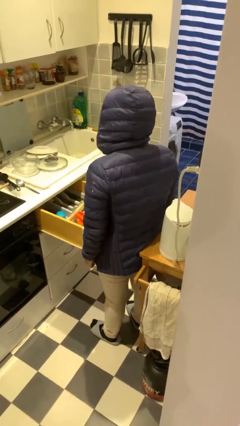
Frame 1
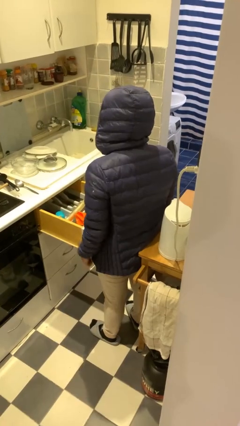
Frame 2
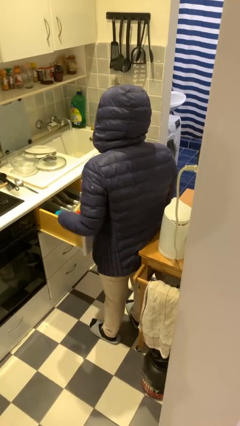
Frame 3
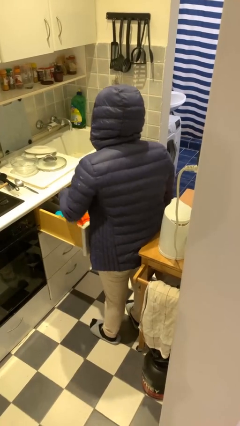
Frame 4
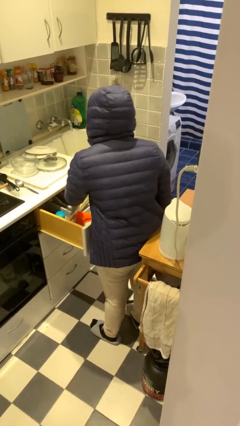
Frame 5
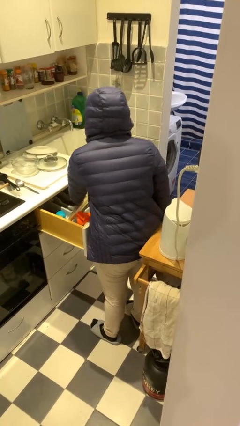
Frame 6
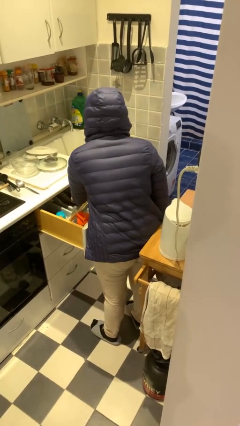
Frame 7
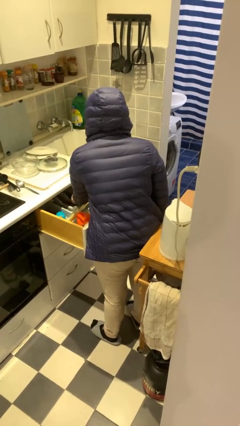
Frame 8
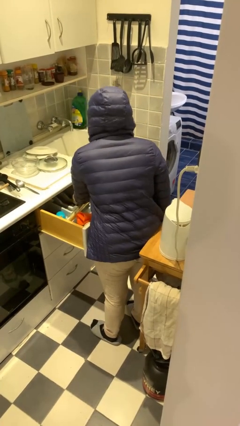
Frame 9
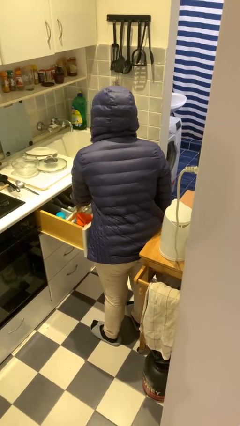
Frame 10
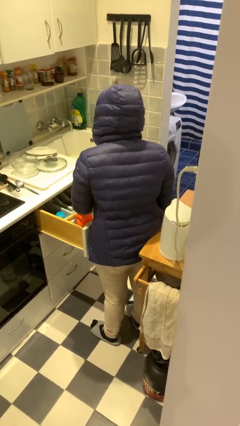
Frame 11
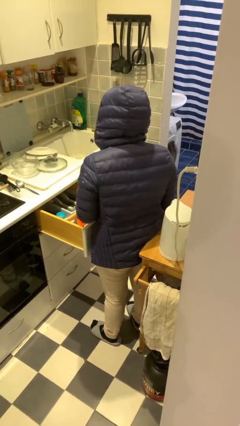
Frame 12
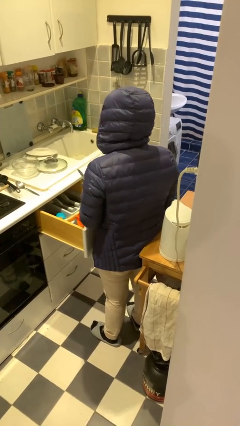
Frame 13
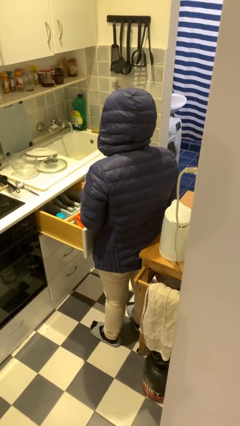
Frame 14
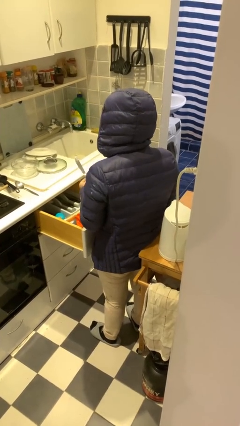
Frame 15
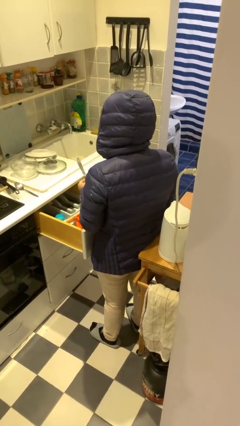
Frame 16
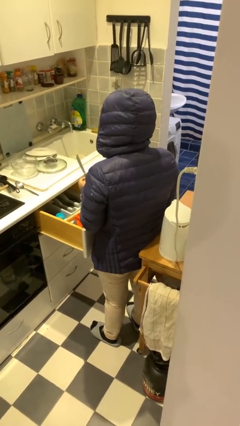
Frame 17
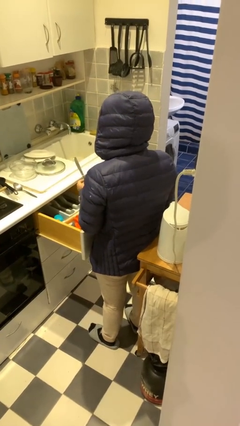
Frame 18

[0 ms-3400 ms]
person takes object from kitchen drawer

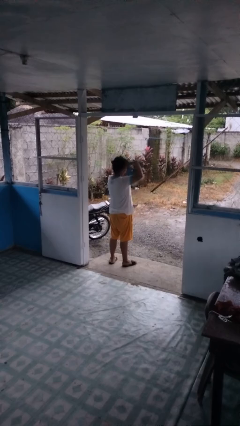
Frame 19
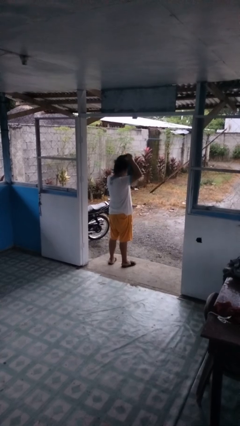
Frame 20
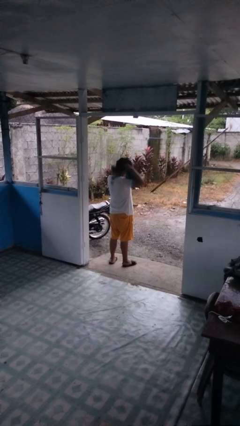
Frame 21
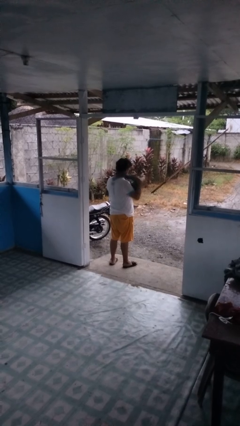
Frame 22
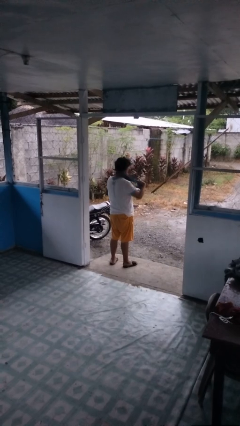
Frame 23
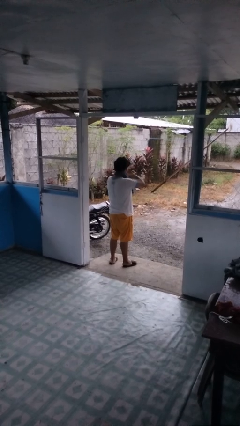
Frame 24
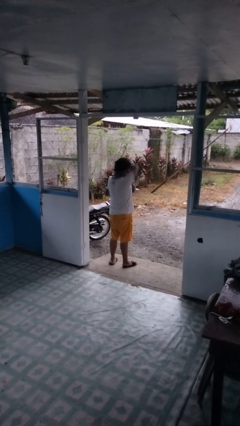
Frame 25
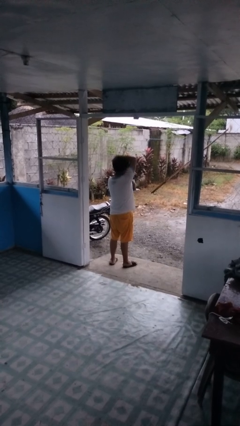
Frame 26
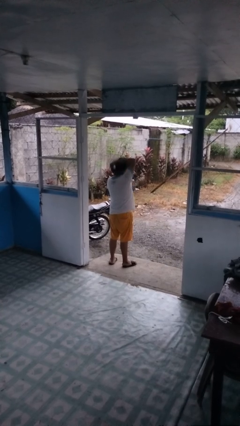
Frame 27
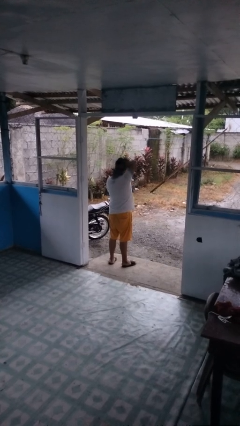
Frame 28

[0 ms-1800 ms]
person puts on scarf

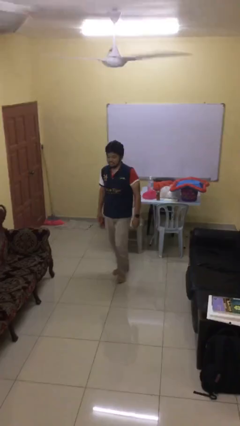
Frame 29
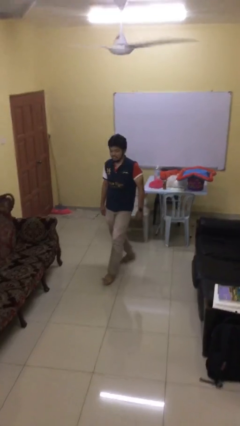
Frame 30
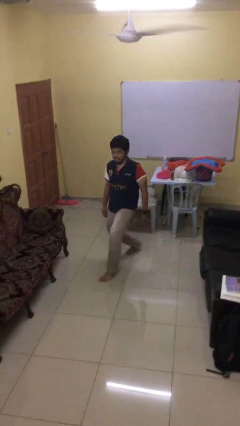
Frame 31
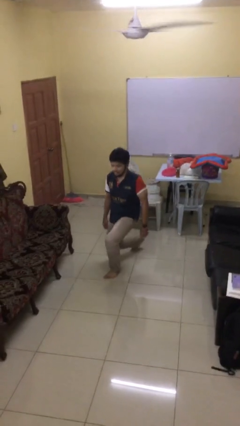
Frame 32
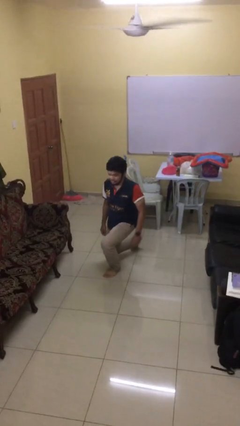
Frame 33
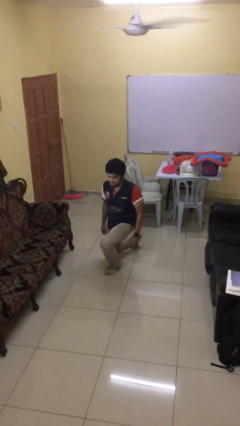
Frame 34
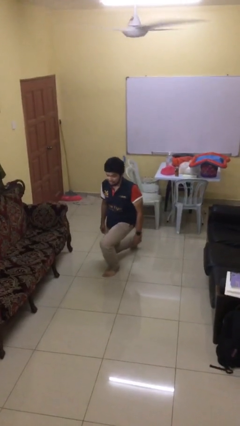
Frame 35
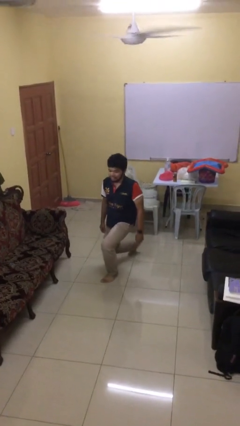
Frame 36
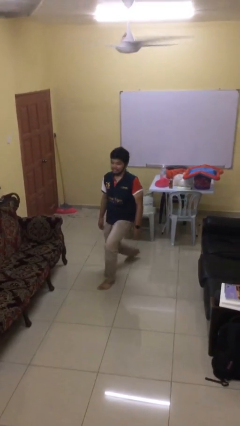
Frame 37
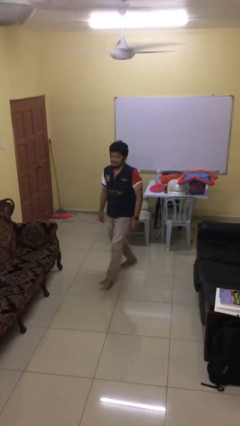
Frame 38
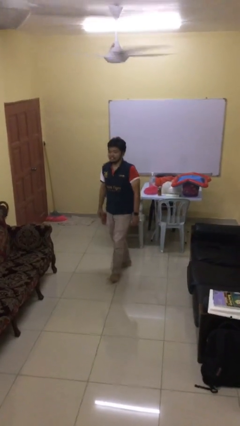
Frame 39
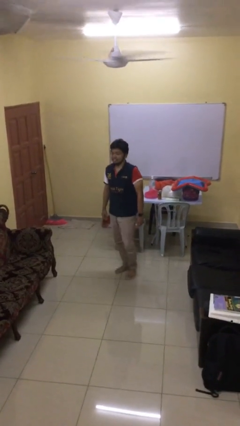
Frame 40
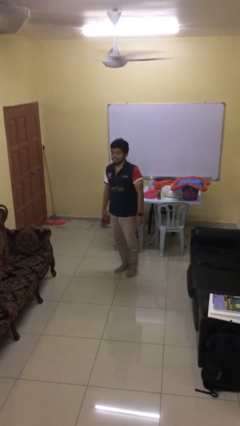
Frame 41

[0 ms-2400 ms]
person exercises with lunges

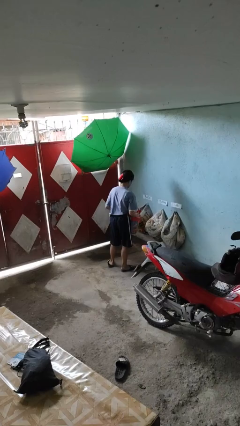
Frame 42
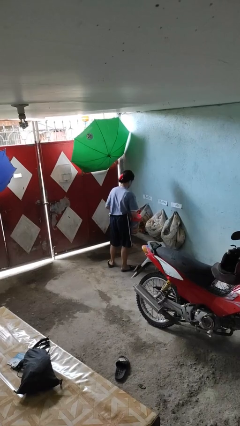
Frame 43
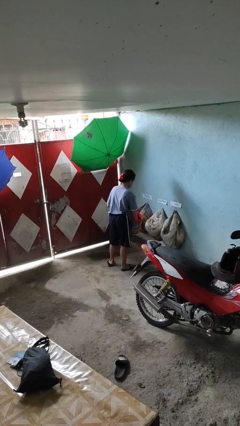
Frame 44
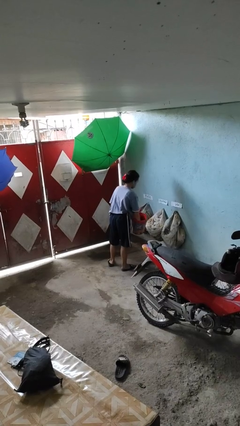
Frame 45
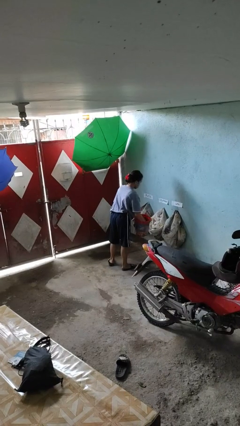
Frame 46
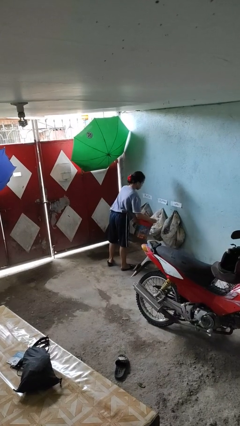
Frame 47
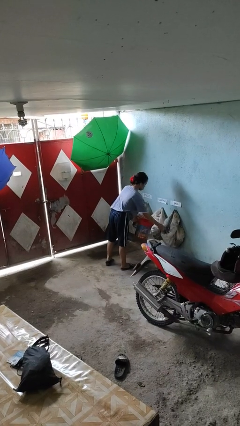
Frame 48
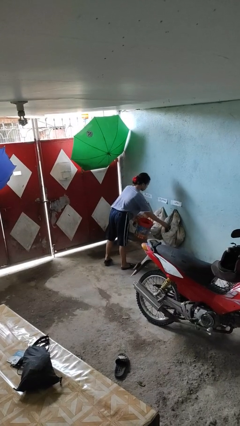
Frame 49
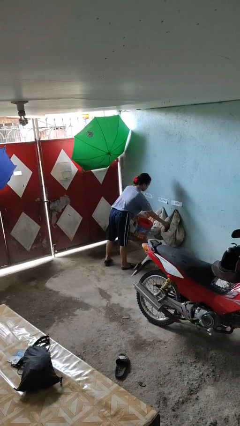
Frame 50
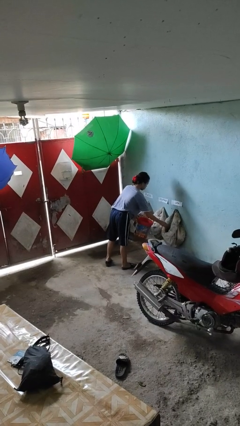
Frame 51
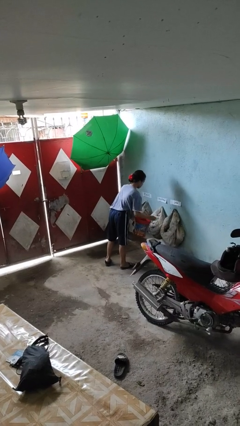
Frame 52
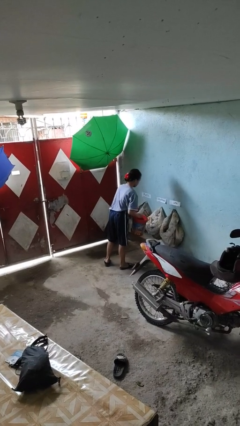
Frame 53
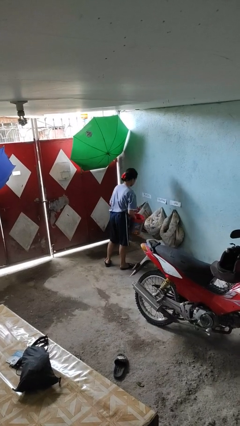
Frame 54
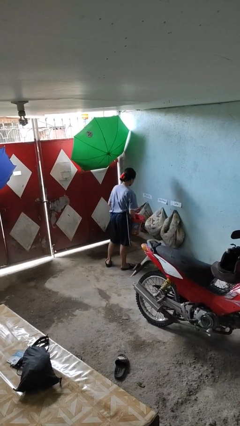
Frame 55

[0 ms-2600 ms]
person discards trash

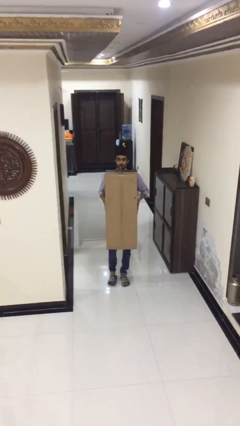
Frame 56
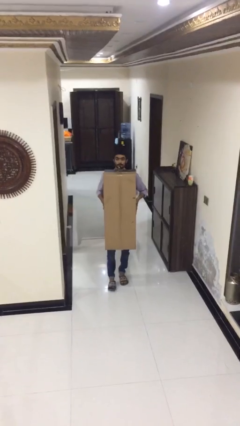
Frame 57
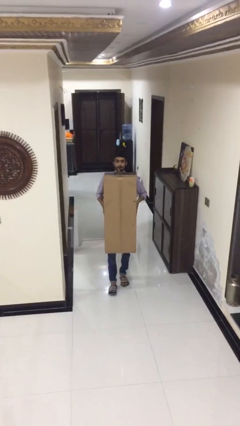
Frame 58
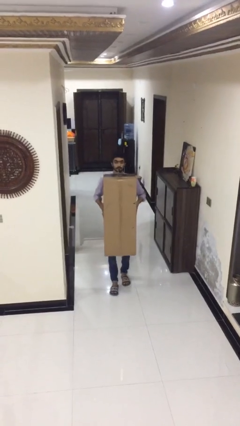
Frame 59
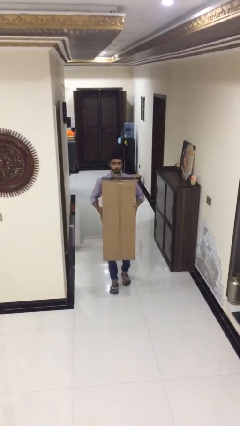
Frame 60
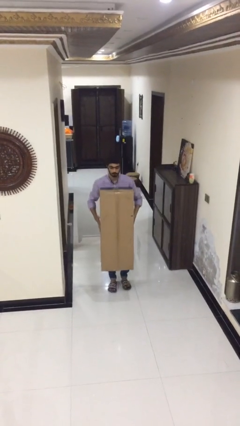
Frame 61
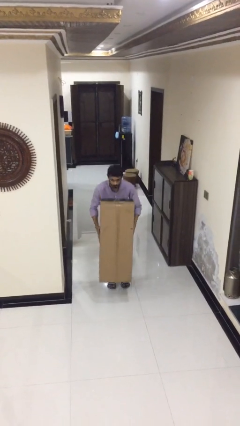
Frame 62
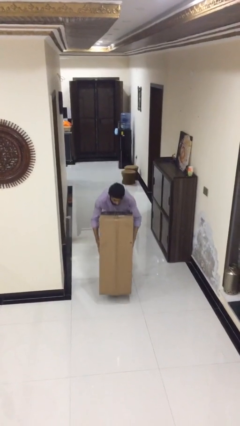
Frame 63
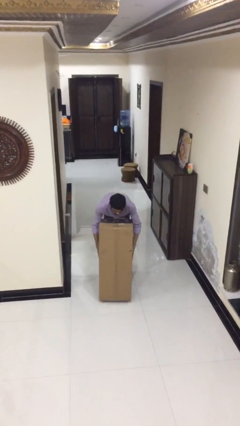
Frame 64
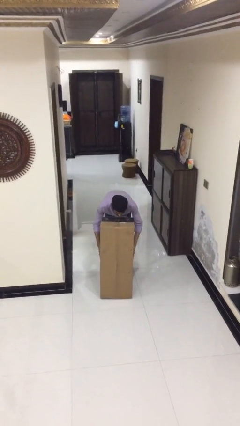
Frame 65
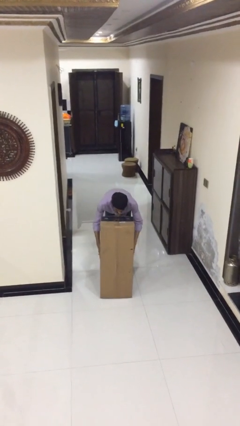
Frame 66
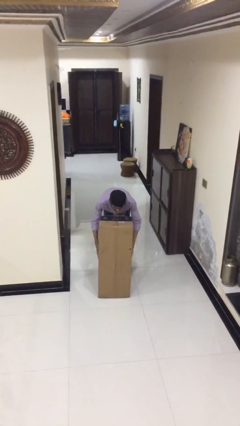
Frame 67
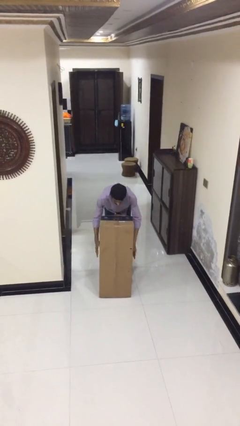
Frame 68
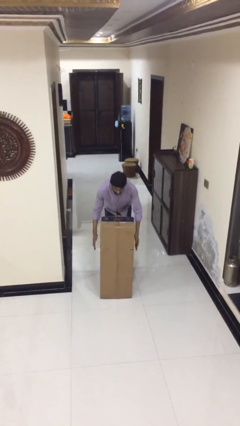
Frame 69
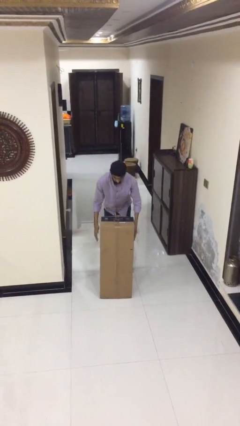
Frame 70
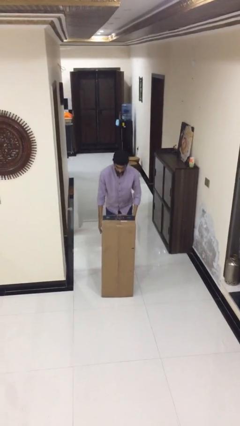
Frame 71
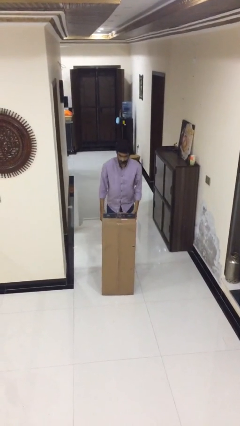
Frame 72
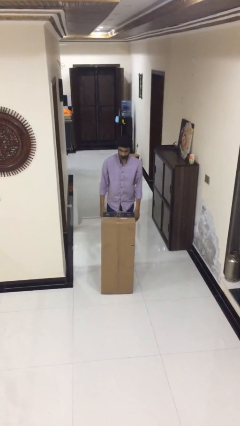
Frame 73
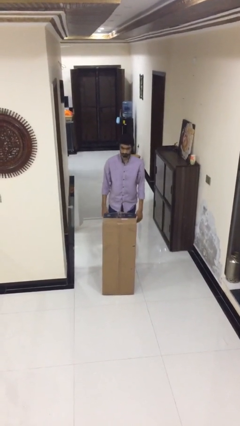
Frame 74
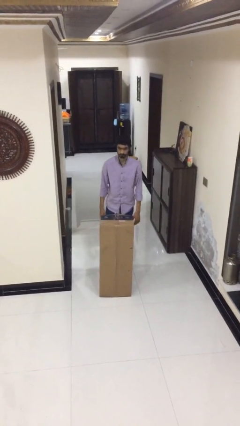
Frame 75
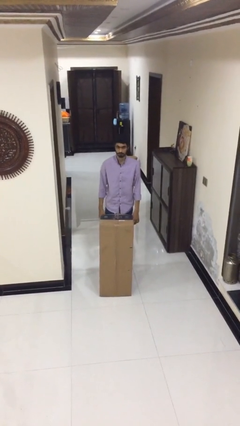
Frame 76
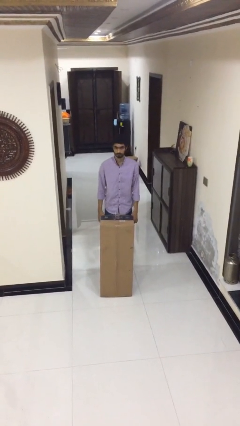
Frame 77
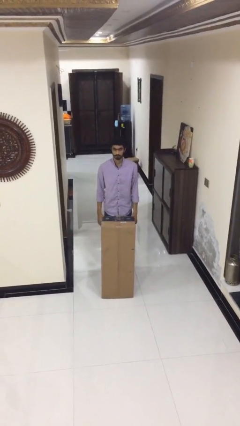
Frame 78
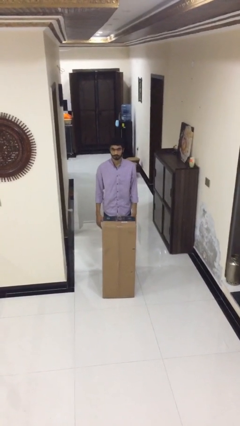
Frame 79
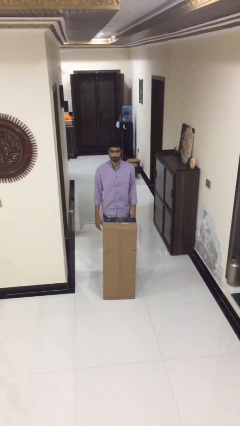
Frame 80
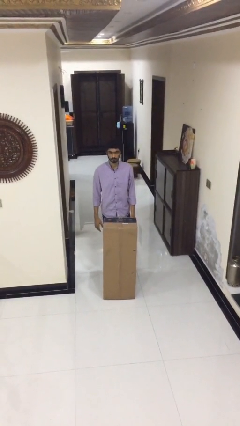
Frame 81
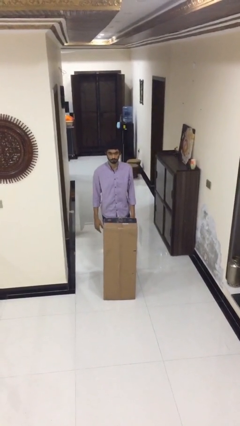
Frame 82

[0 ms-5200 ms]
person puts down object on floor

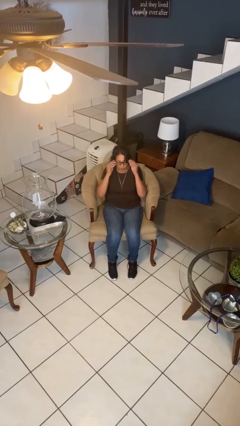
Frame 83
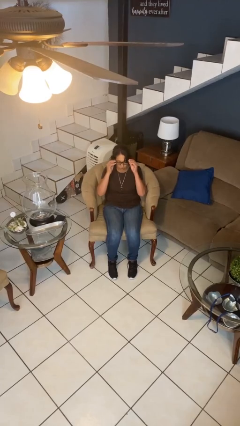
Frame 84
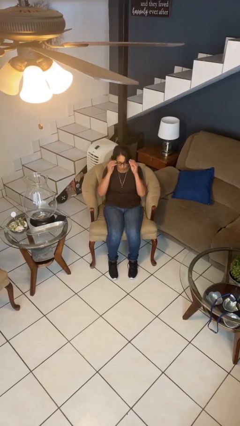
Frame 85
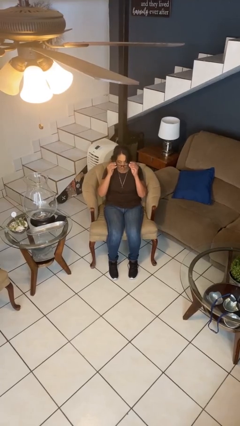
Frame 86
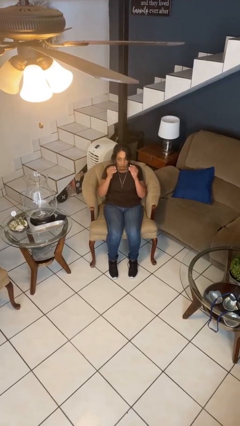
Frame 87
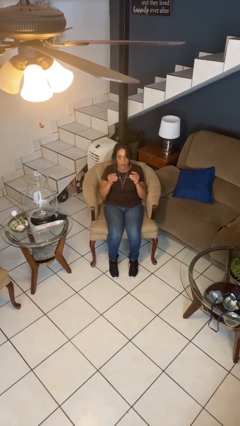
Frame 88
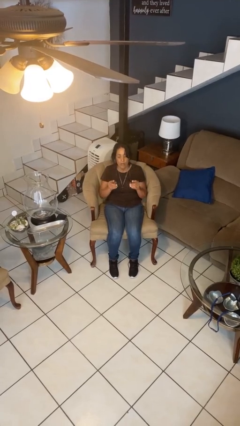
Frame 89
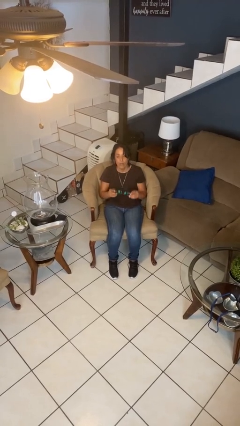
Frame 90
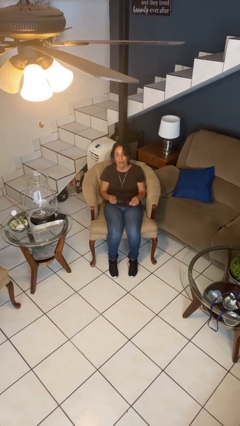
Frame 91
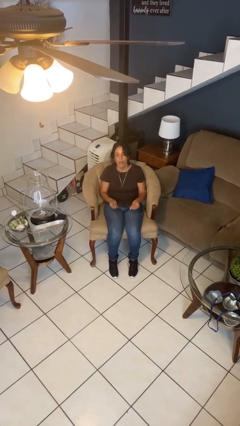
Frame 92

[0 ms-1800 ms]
person takes off glasses

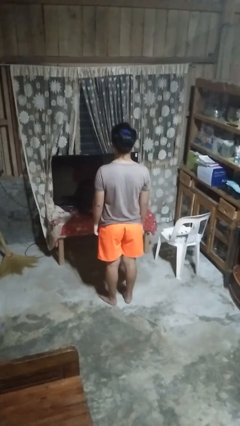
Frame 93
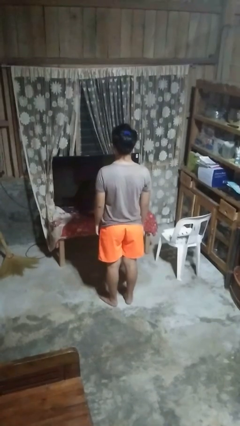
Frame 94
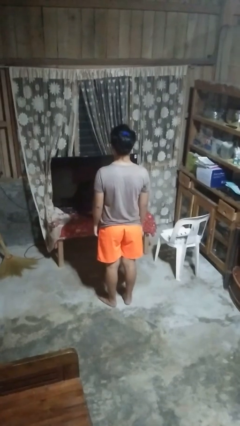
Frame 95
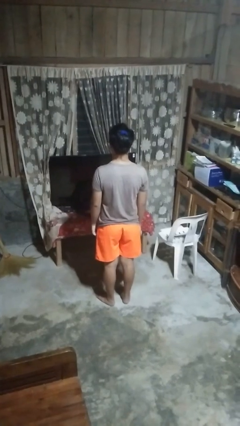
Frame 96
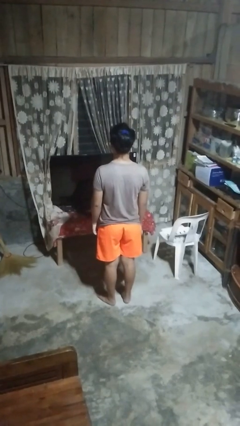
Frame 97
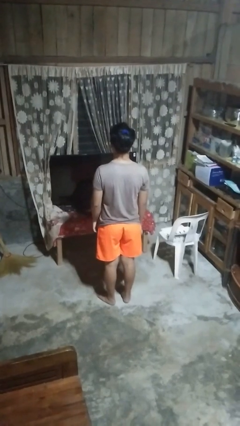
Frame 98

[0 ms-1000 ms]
person gestures number five
